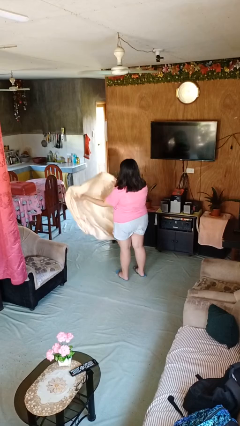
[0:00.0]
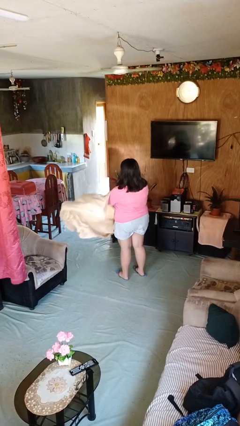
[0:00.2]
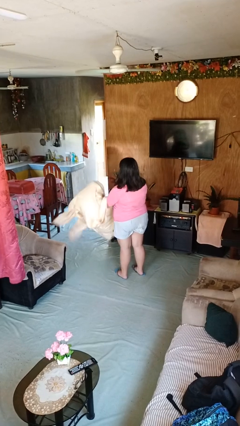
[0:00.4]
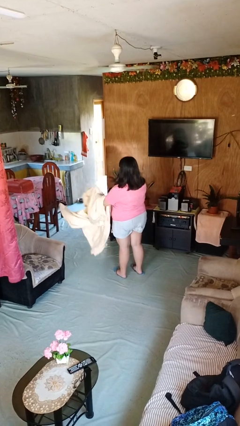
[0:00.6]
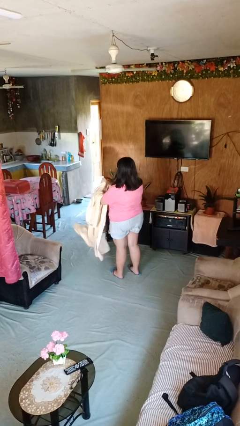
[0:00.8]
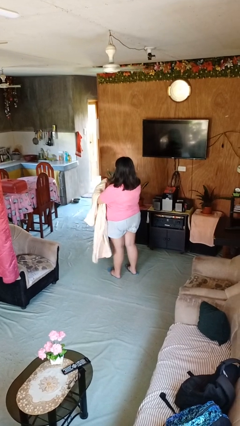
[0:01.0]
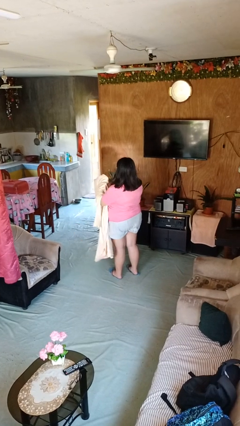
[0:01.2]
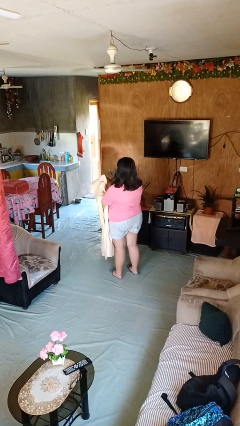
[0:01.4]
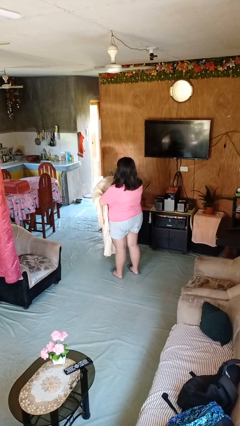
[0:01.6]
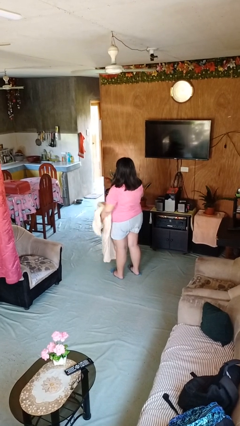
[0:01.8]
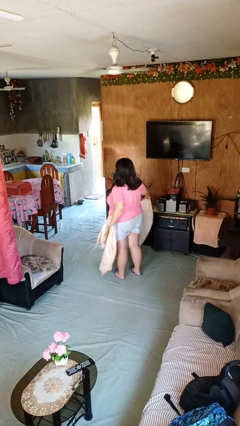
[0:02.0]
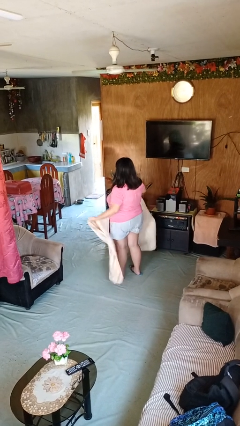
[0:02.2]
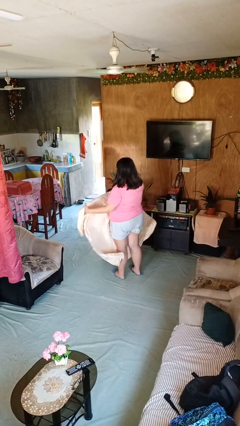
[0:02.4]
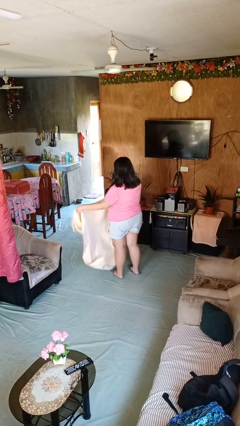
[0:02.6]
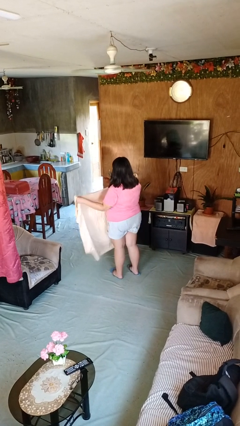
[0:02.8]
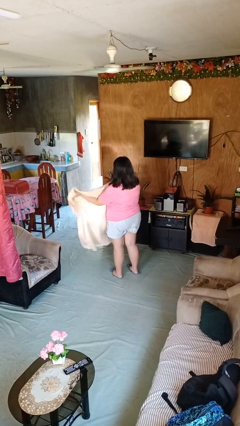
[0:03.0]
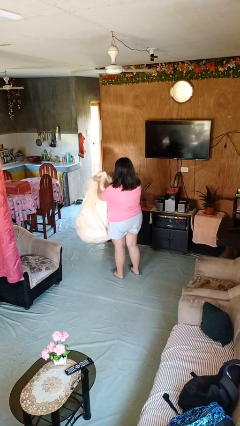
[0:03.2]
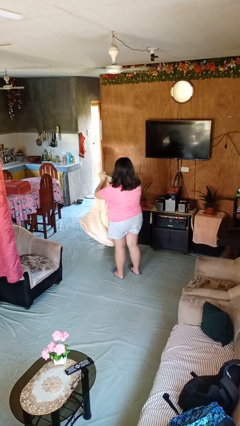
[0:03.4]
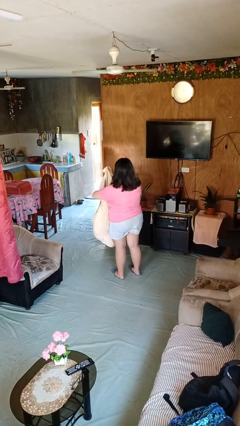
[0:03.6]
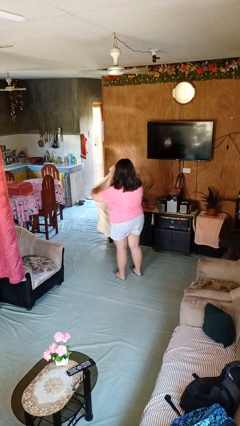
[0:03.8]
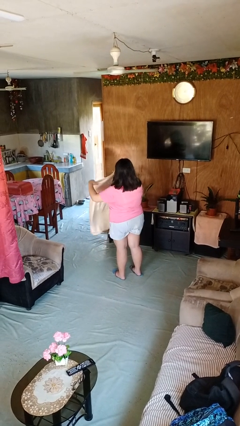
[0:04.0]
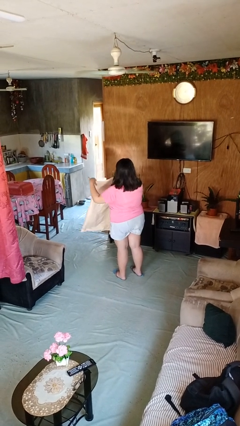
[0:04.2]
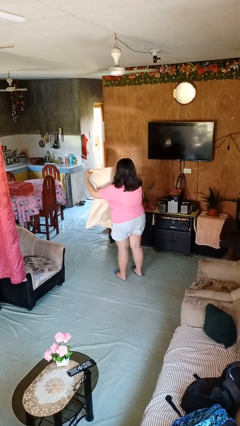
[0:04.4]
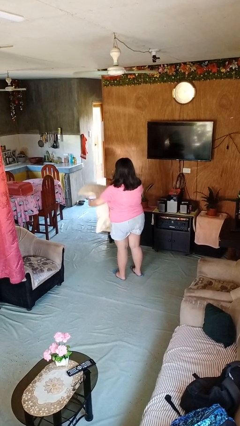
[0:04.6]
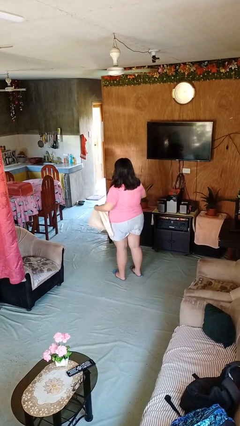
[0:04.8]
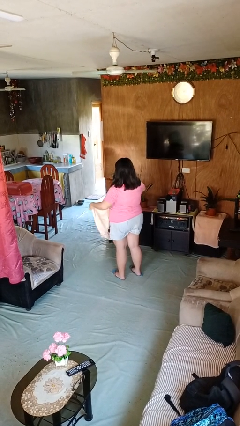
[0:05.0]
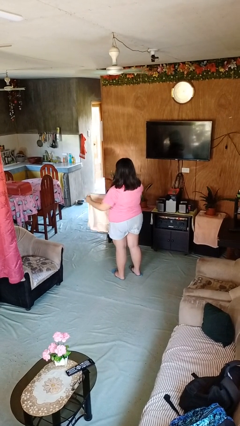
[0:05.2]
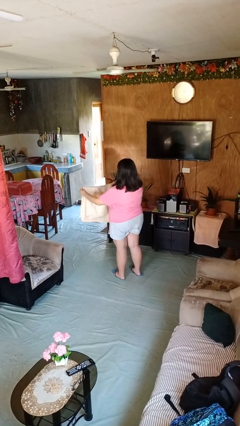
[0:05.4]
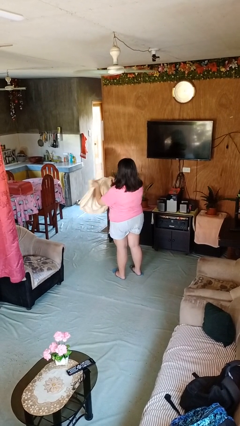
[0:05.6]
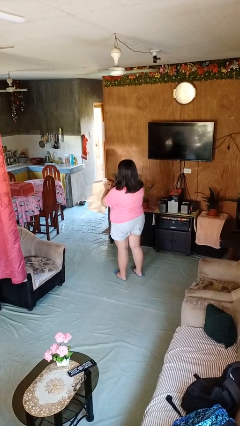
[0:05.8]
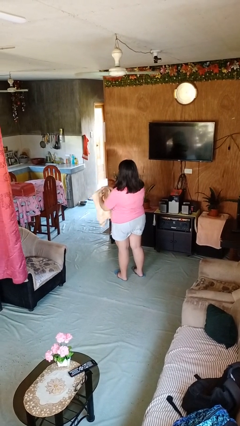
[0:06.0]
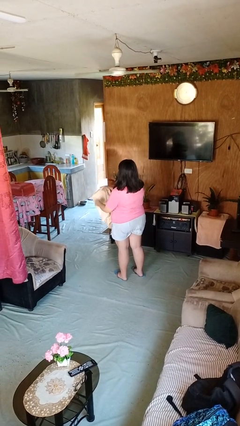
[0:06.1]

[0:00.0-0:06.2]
person folds blanket

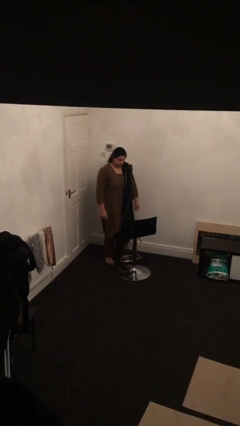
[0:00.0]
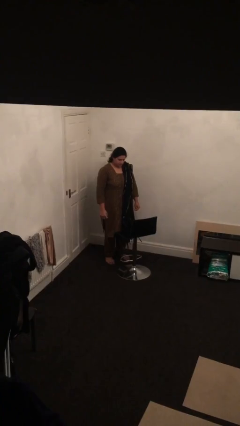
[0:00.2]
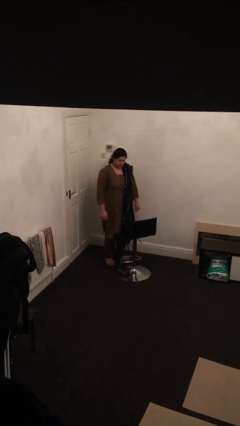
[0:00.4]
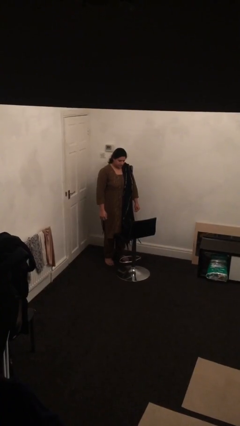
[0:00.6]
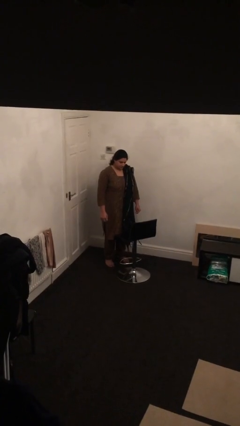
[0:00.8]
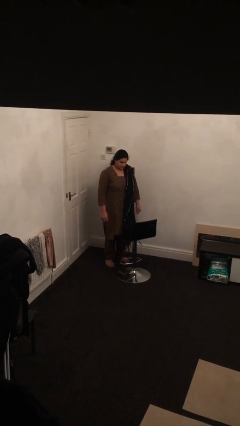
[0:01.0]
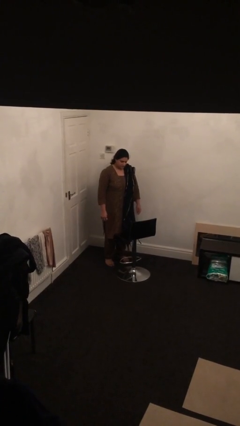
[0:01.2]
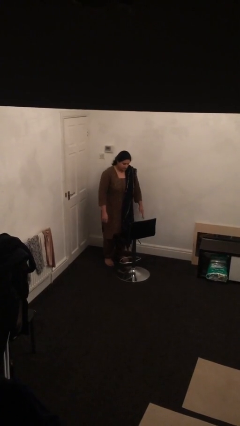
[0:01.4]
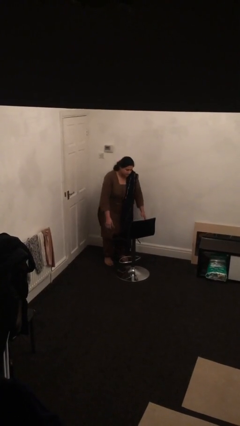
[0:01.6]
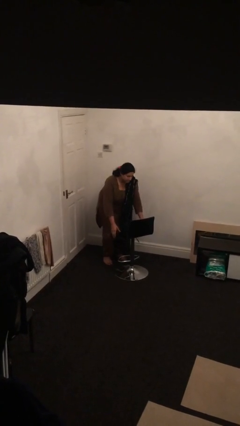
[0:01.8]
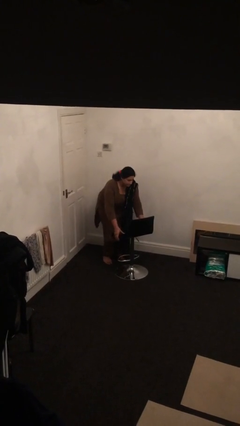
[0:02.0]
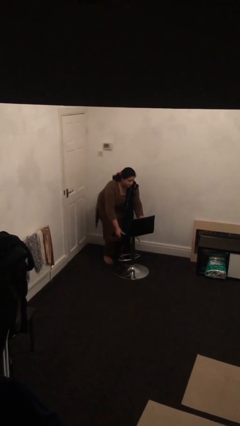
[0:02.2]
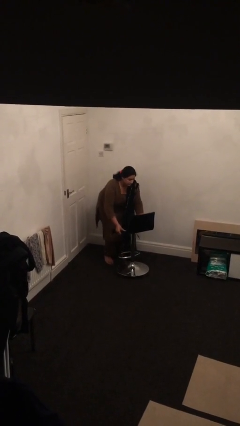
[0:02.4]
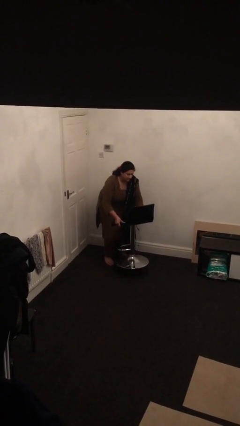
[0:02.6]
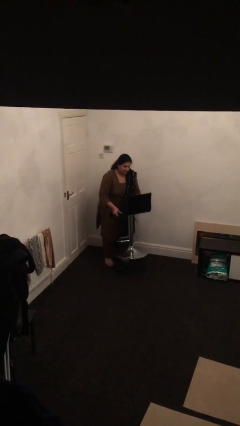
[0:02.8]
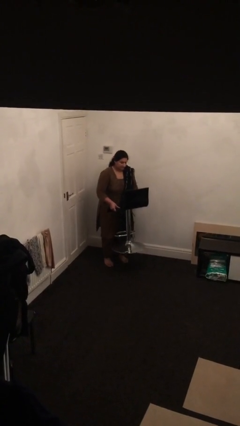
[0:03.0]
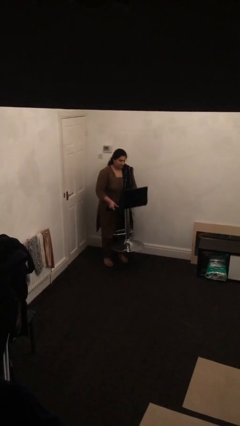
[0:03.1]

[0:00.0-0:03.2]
person picks up object from floor

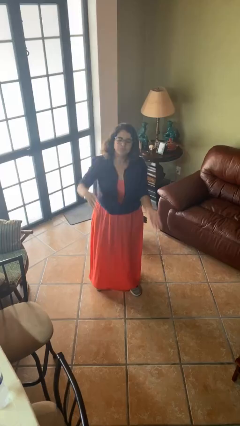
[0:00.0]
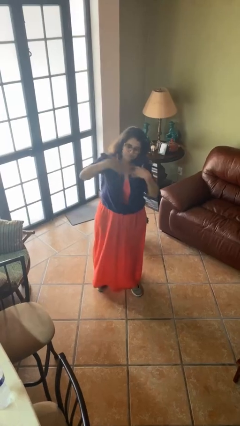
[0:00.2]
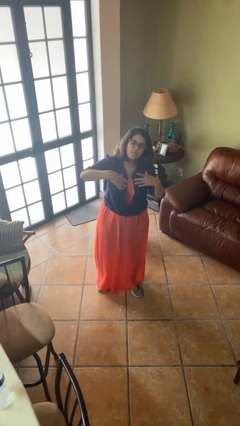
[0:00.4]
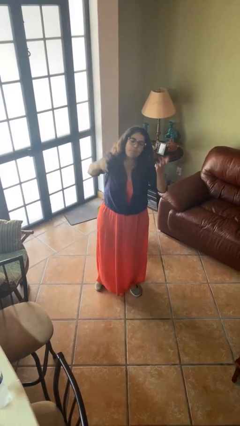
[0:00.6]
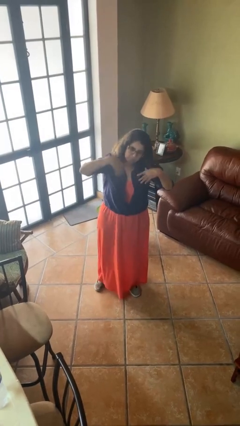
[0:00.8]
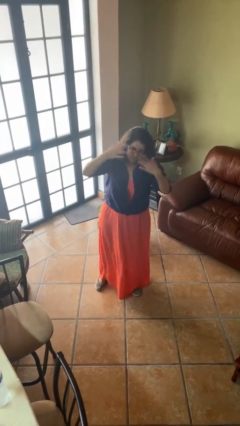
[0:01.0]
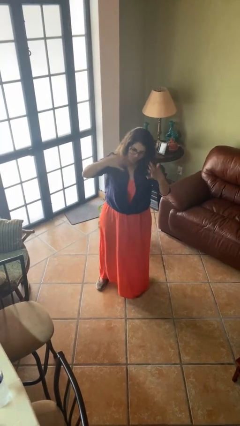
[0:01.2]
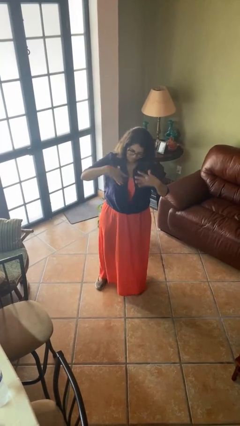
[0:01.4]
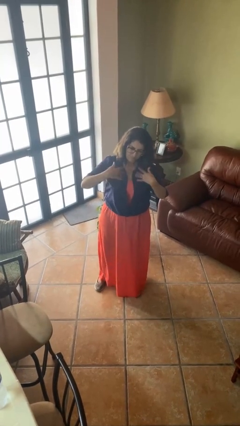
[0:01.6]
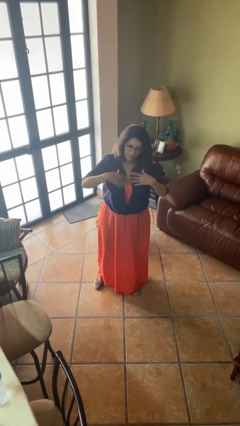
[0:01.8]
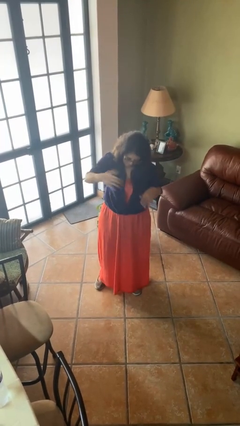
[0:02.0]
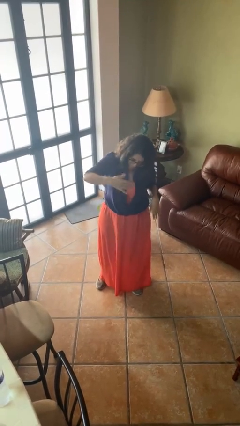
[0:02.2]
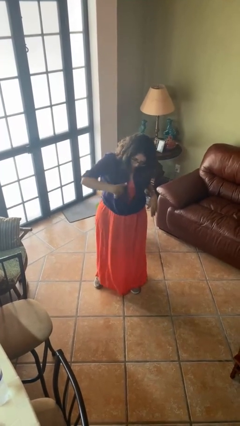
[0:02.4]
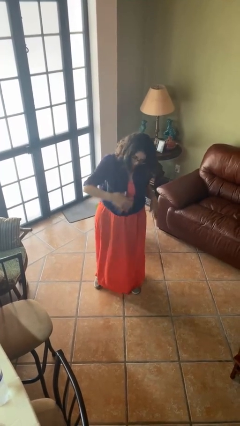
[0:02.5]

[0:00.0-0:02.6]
person gestures come here

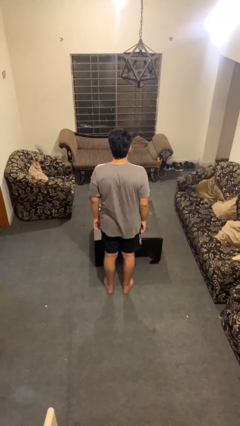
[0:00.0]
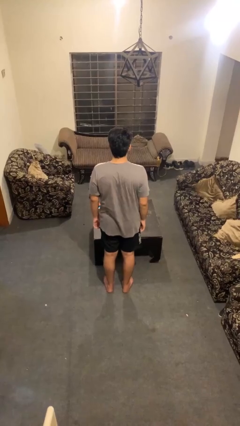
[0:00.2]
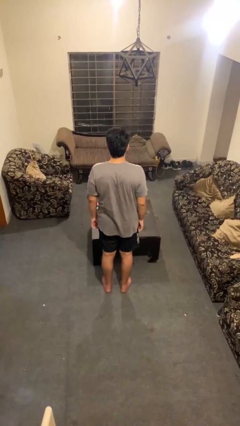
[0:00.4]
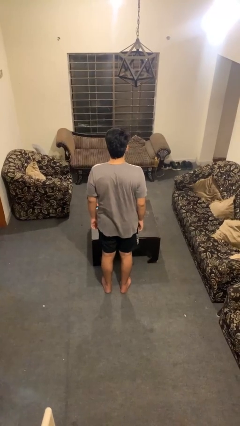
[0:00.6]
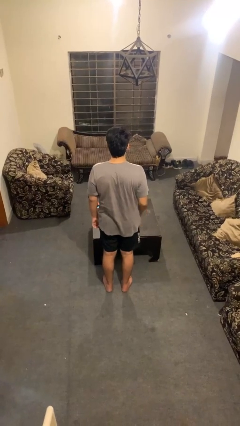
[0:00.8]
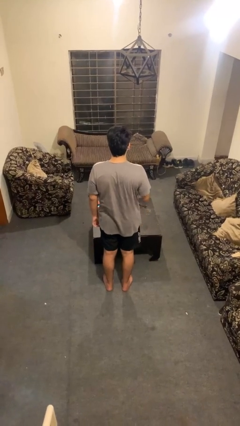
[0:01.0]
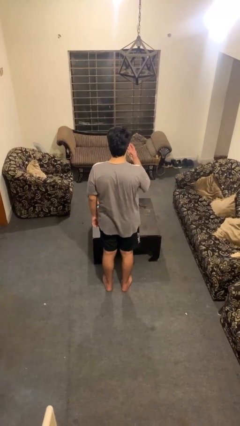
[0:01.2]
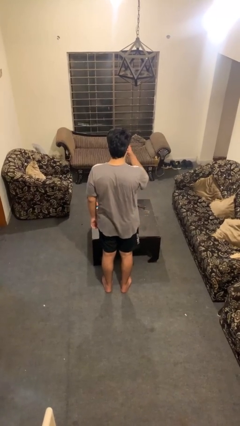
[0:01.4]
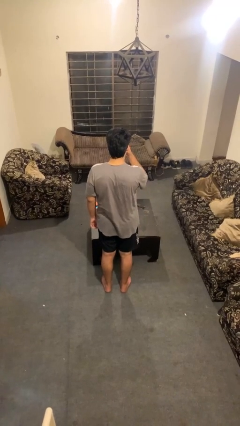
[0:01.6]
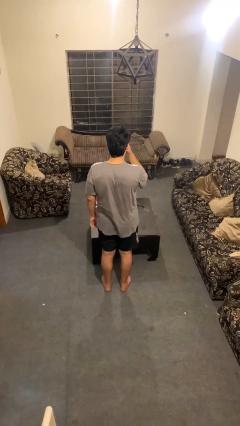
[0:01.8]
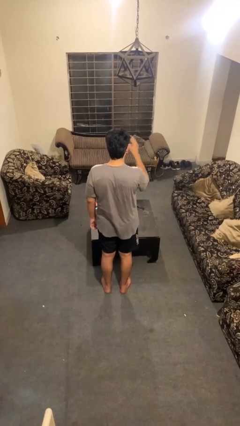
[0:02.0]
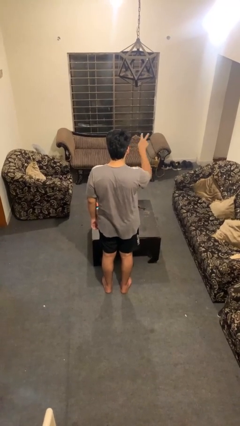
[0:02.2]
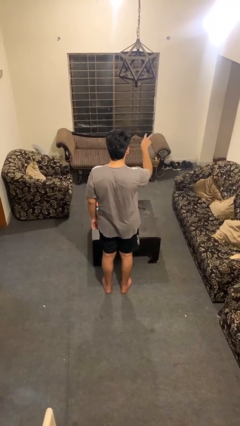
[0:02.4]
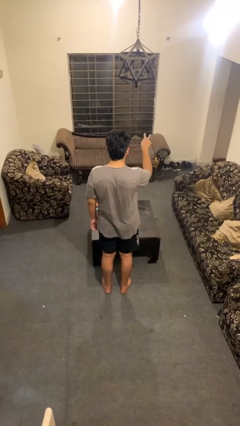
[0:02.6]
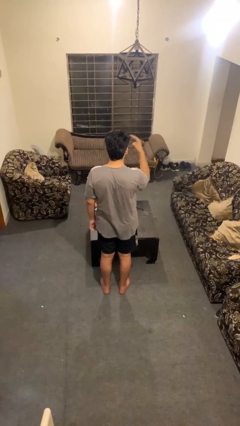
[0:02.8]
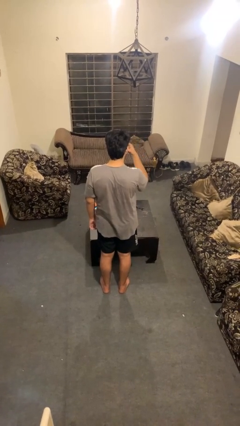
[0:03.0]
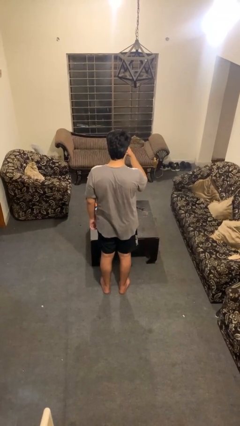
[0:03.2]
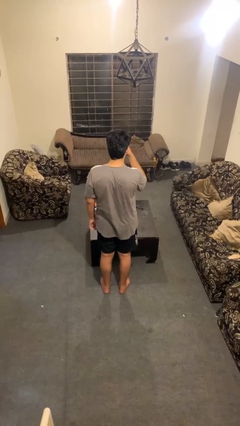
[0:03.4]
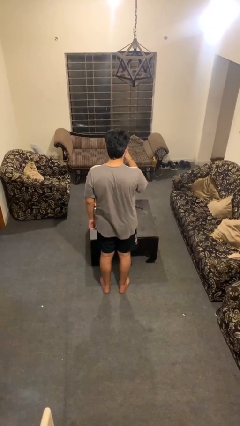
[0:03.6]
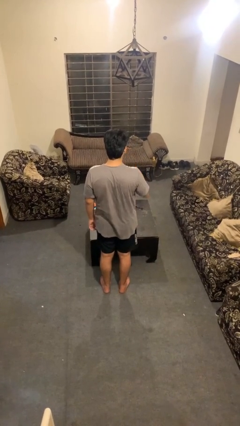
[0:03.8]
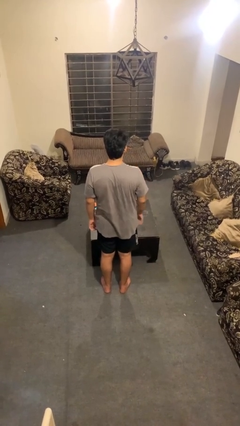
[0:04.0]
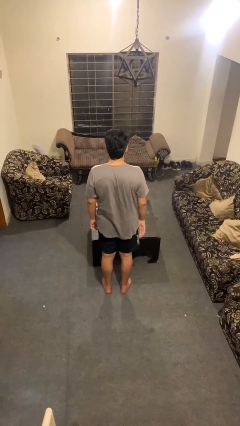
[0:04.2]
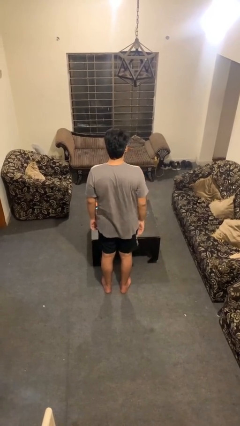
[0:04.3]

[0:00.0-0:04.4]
person gestures watch closely

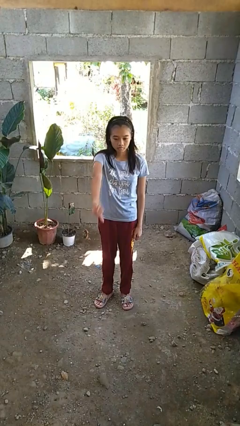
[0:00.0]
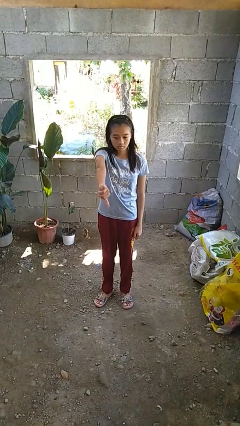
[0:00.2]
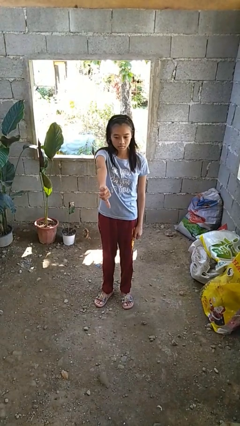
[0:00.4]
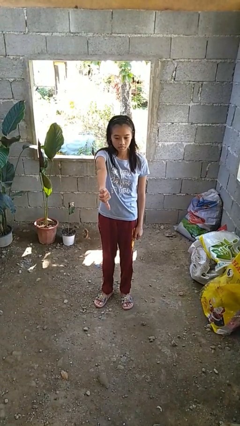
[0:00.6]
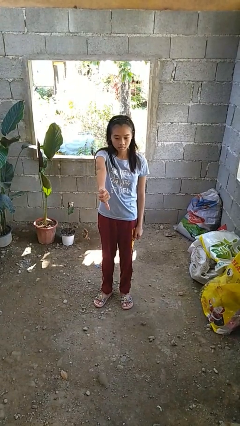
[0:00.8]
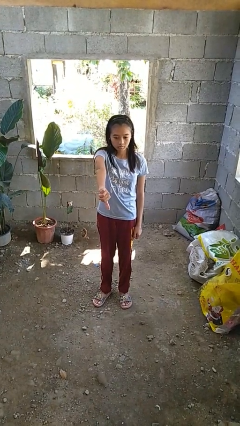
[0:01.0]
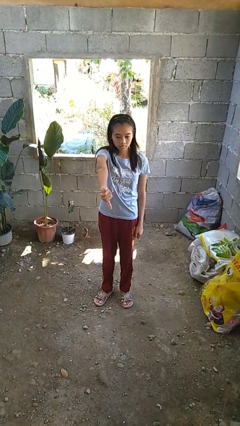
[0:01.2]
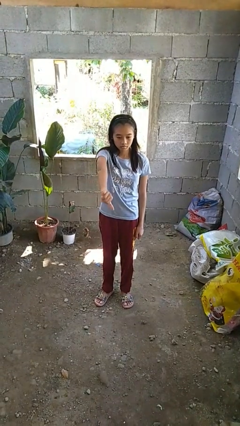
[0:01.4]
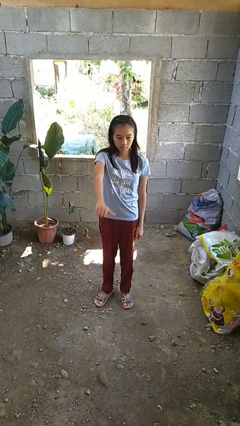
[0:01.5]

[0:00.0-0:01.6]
person gestures thumbs down
